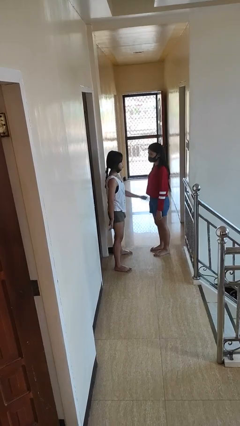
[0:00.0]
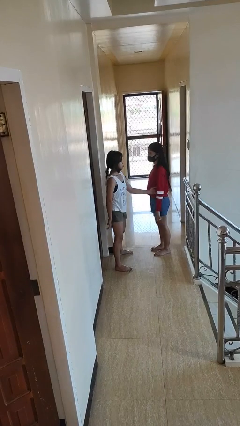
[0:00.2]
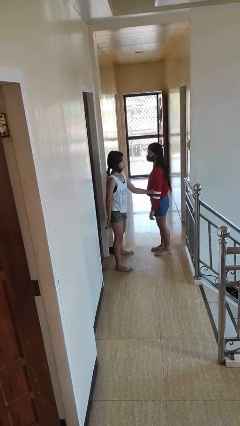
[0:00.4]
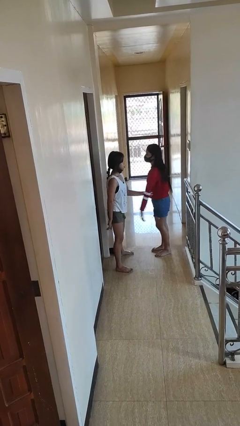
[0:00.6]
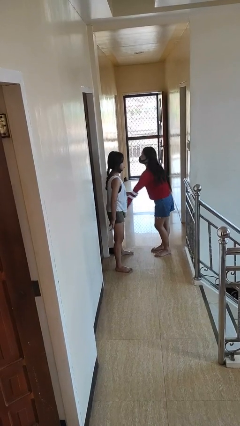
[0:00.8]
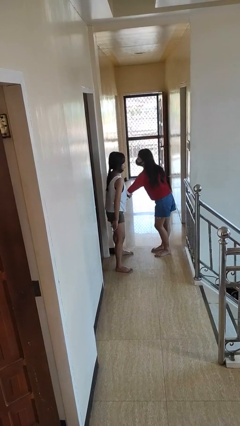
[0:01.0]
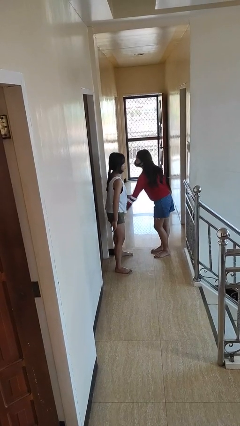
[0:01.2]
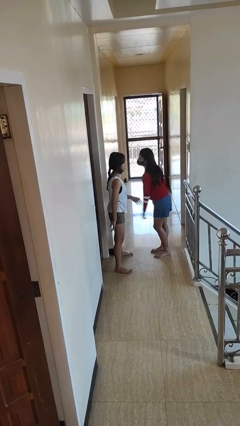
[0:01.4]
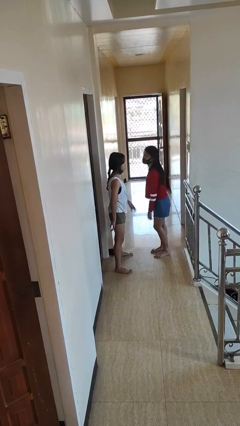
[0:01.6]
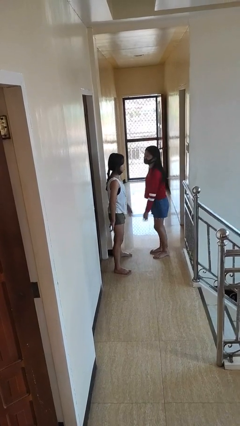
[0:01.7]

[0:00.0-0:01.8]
person grabs person by forearm

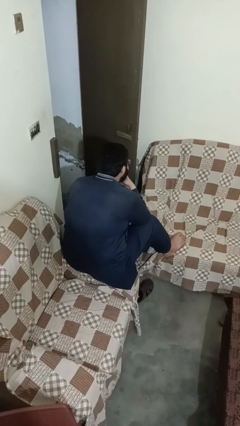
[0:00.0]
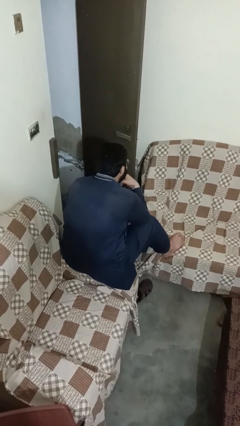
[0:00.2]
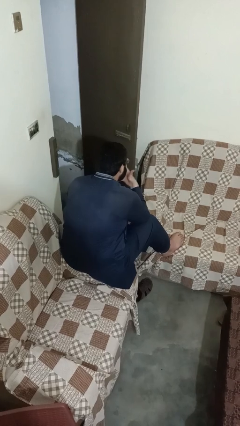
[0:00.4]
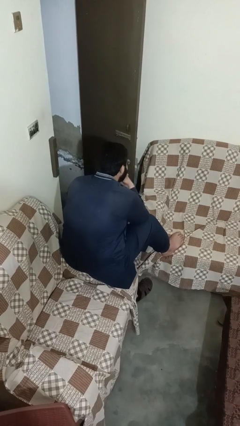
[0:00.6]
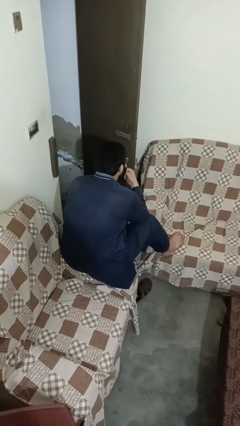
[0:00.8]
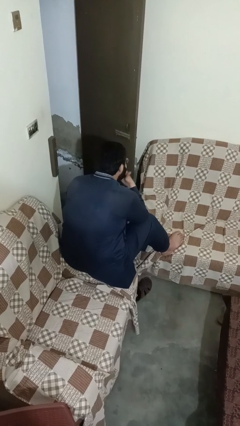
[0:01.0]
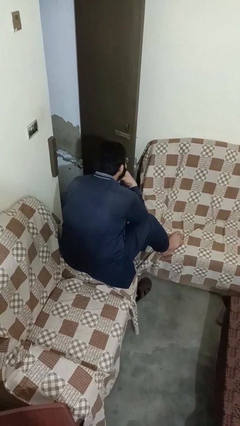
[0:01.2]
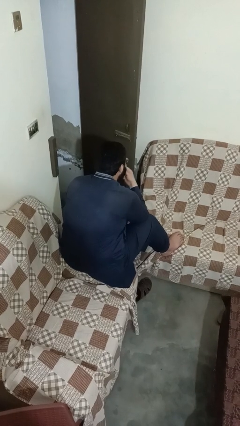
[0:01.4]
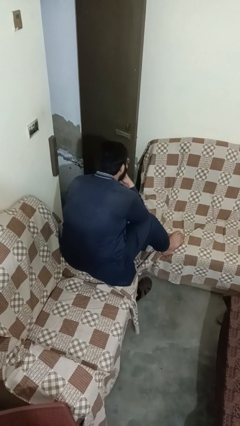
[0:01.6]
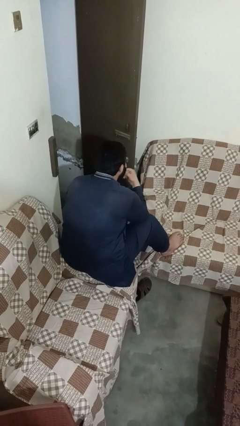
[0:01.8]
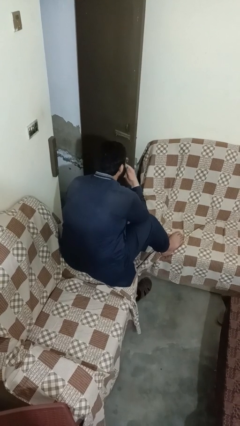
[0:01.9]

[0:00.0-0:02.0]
person strokes chin

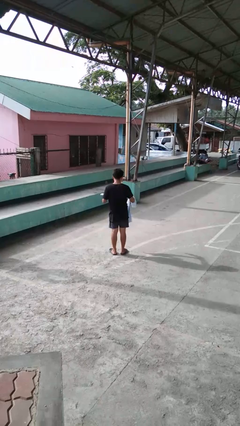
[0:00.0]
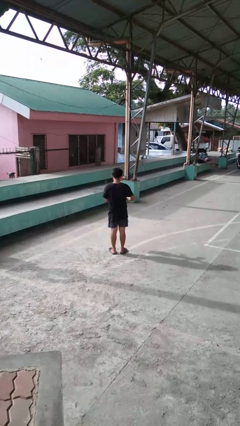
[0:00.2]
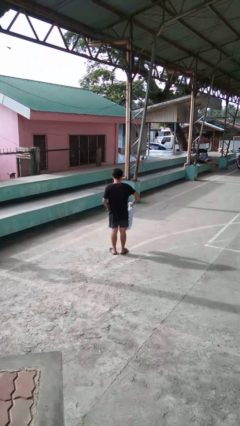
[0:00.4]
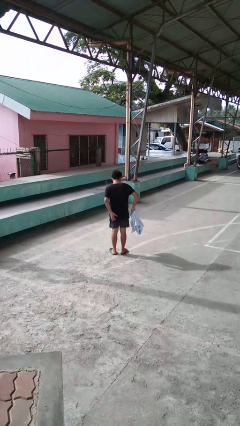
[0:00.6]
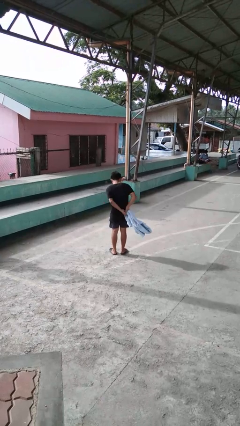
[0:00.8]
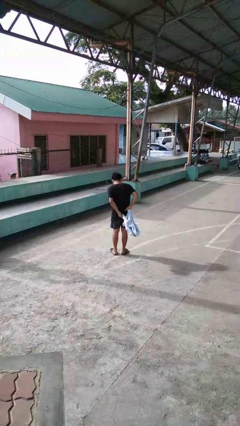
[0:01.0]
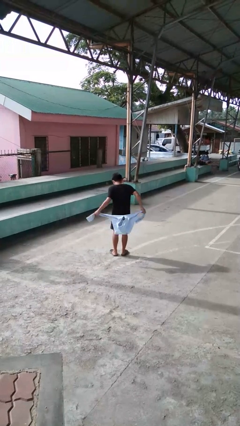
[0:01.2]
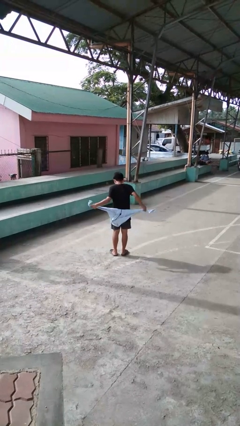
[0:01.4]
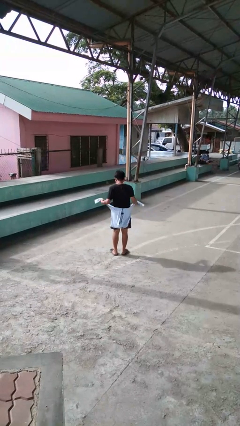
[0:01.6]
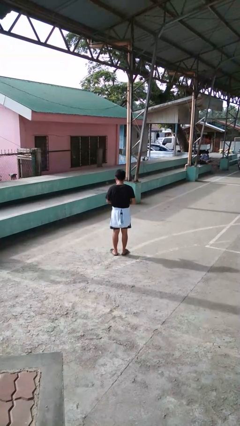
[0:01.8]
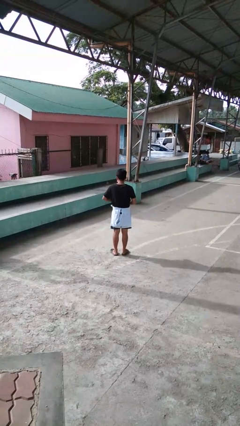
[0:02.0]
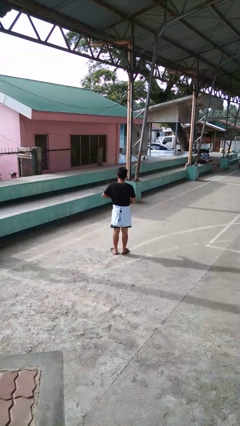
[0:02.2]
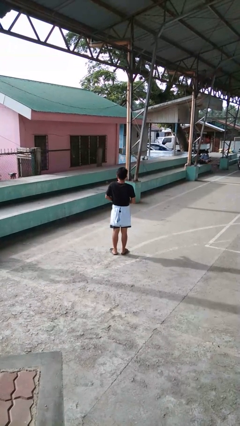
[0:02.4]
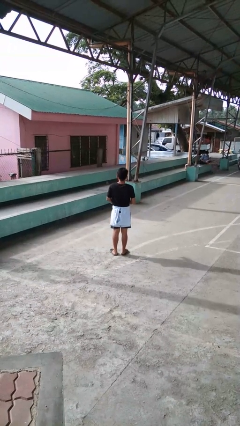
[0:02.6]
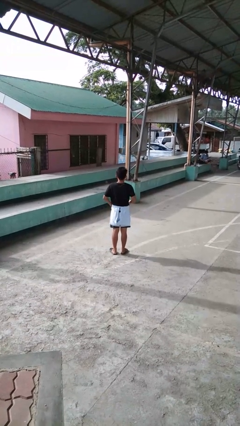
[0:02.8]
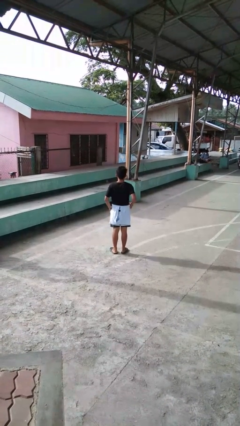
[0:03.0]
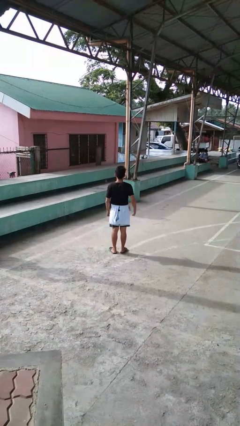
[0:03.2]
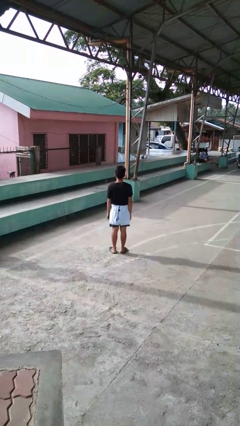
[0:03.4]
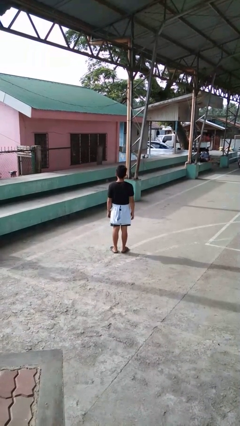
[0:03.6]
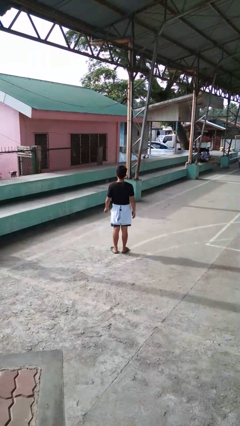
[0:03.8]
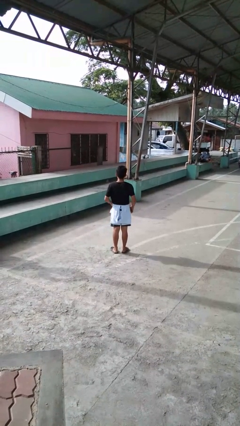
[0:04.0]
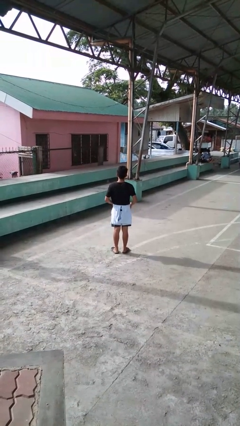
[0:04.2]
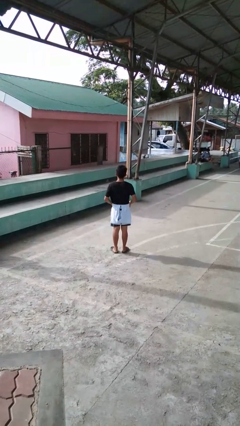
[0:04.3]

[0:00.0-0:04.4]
person ties jacket around waist

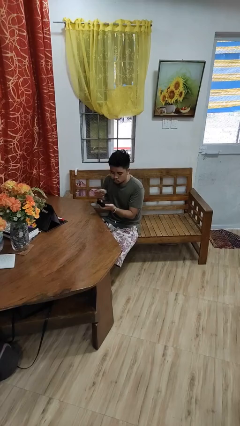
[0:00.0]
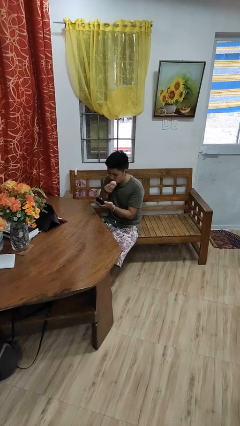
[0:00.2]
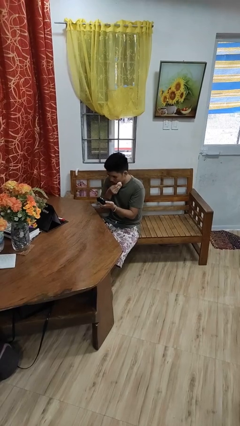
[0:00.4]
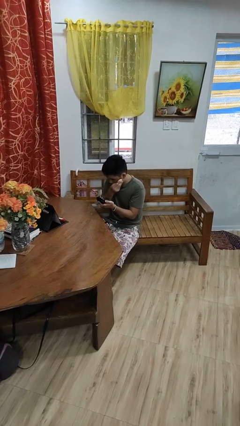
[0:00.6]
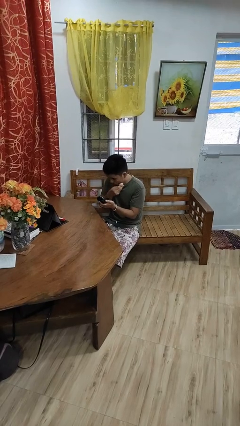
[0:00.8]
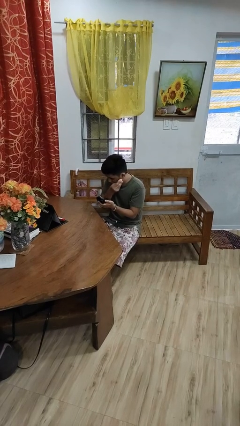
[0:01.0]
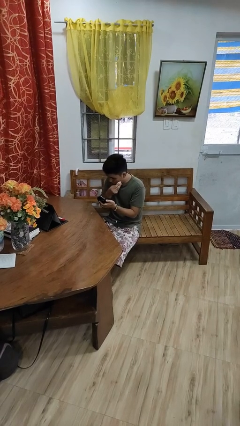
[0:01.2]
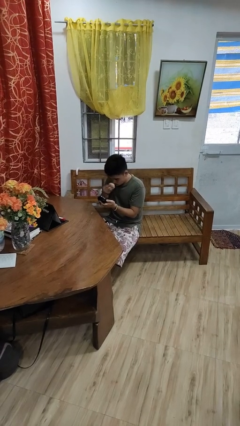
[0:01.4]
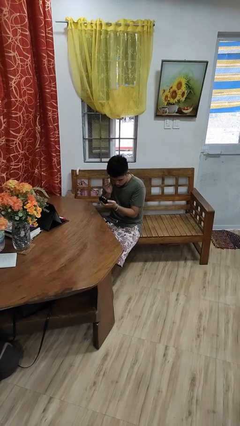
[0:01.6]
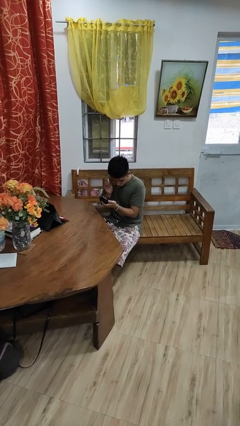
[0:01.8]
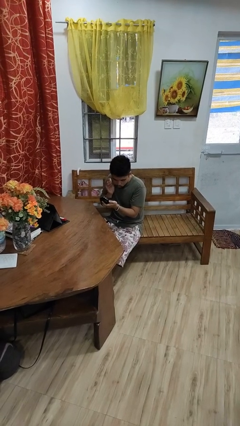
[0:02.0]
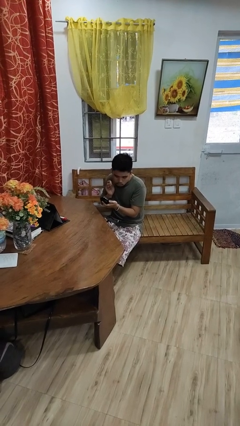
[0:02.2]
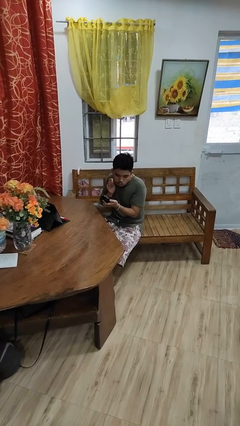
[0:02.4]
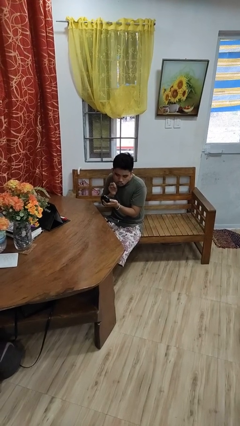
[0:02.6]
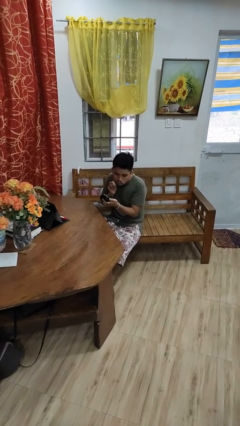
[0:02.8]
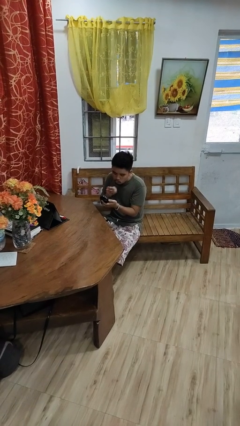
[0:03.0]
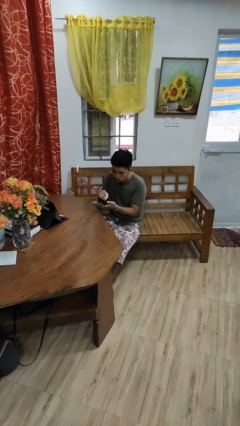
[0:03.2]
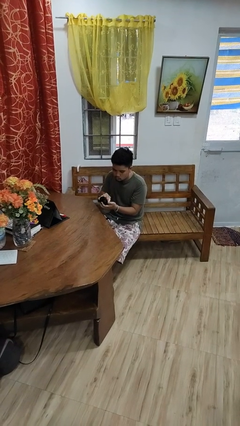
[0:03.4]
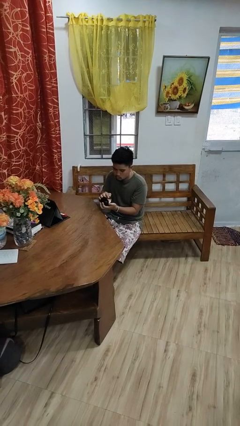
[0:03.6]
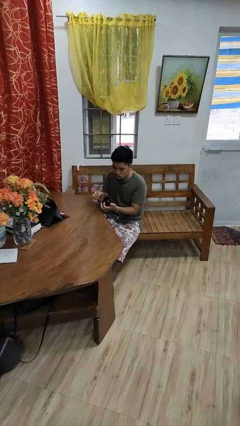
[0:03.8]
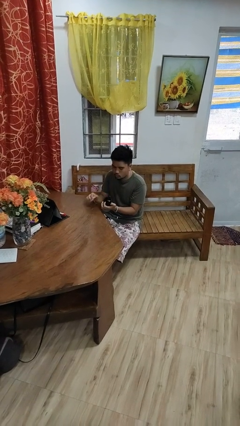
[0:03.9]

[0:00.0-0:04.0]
person applies foundation makeup

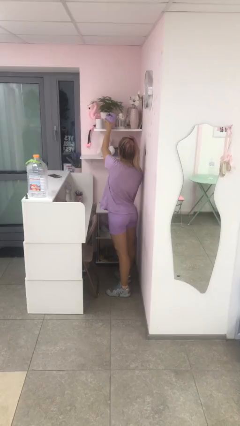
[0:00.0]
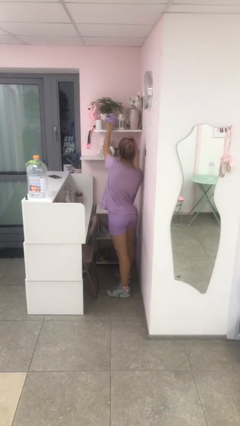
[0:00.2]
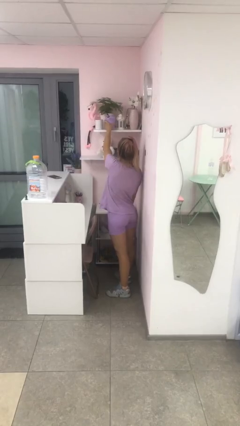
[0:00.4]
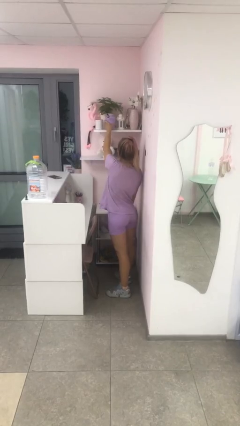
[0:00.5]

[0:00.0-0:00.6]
person puts down object into cabinet

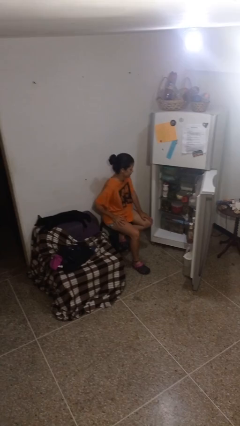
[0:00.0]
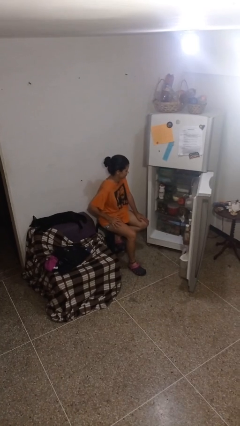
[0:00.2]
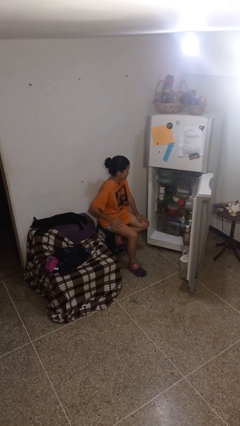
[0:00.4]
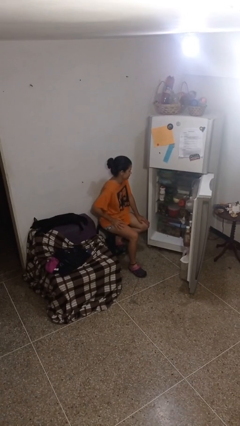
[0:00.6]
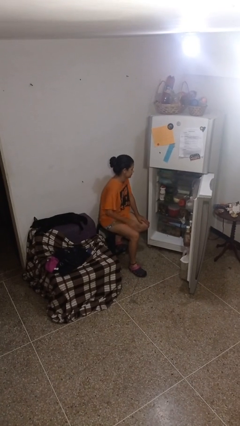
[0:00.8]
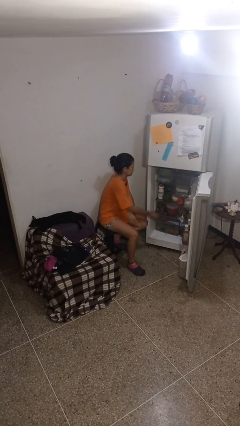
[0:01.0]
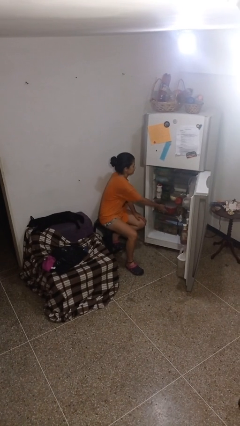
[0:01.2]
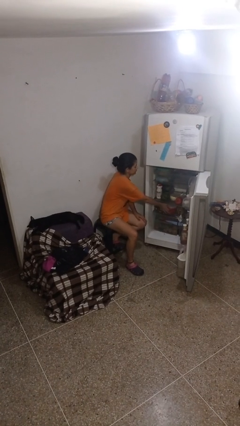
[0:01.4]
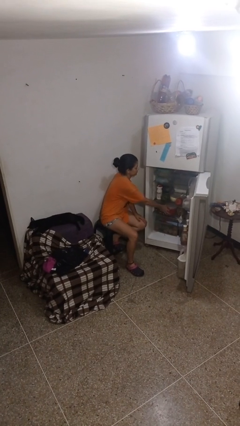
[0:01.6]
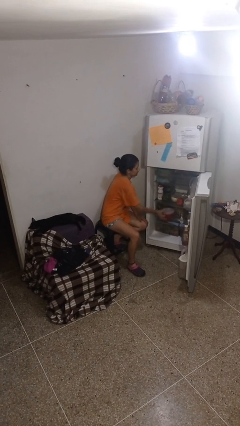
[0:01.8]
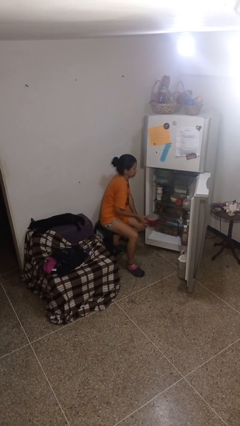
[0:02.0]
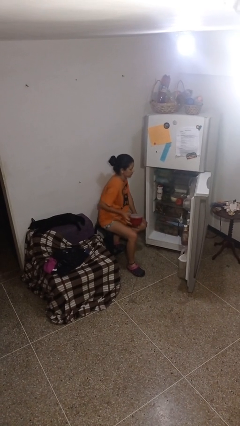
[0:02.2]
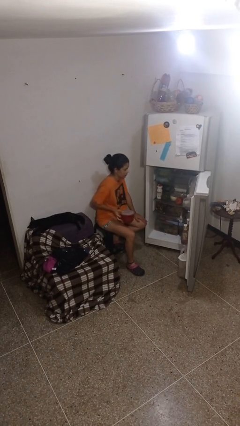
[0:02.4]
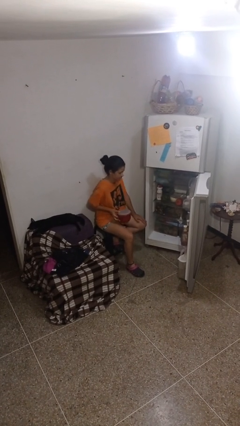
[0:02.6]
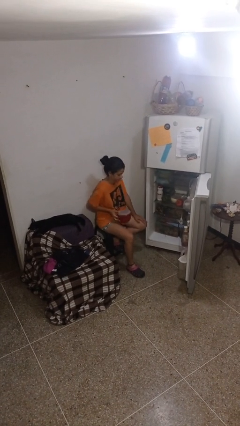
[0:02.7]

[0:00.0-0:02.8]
person takes object from refrigerator

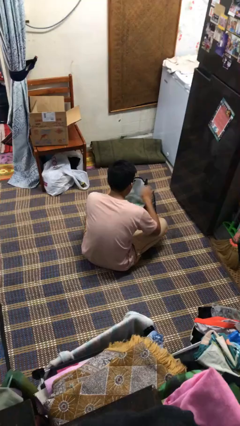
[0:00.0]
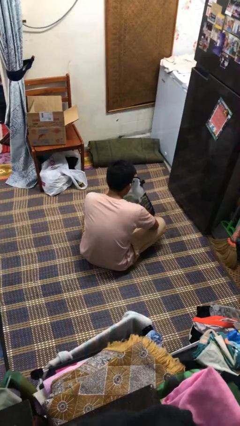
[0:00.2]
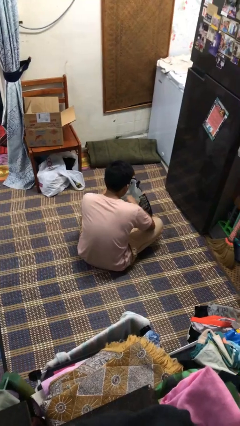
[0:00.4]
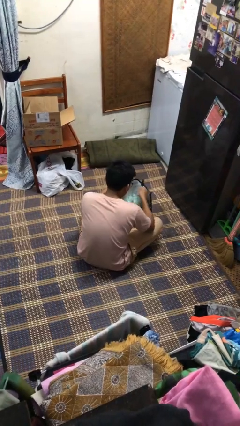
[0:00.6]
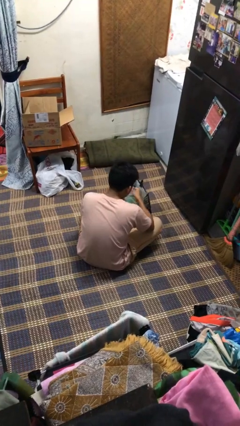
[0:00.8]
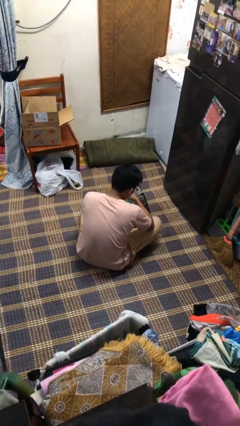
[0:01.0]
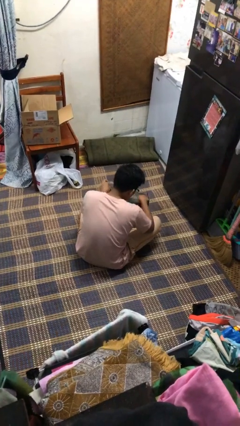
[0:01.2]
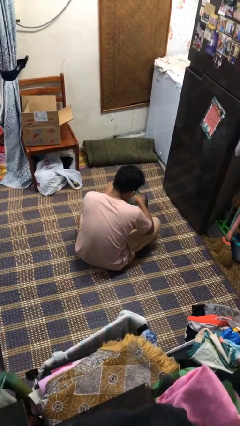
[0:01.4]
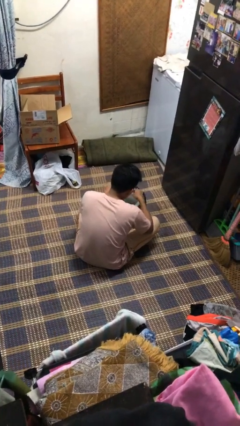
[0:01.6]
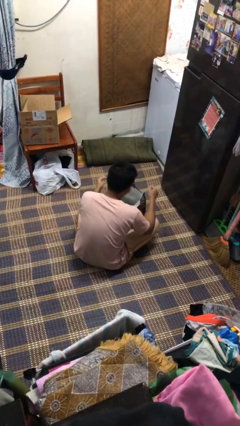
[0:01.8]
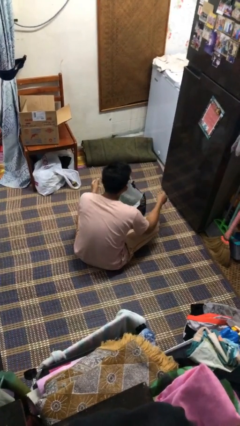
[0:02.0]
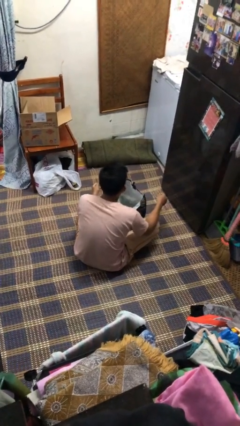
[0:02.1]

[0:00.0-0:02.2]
person searches in bag
